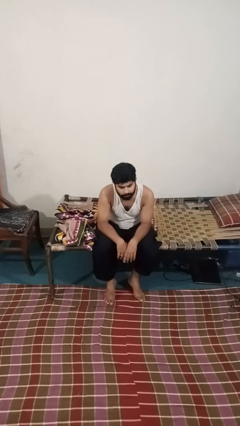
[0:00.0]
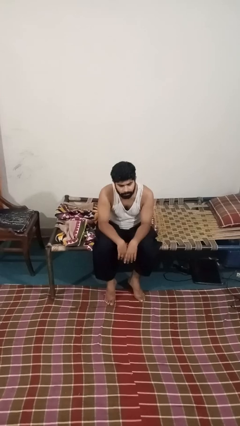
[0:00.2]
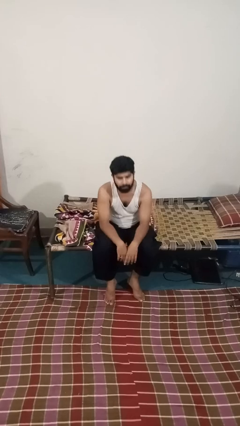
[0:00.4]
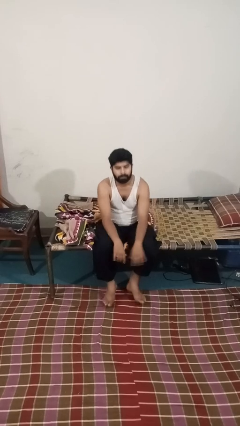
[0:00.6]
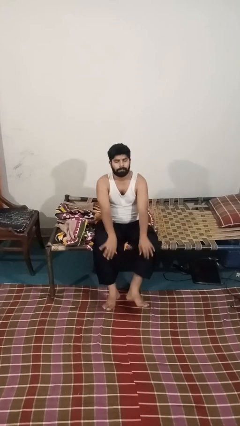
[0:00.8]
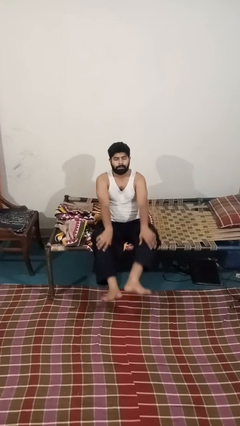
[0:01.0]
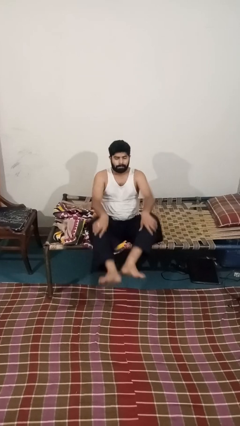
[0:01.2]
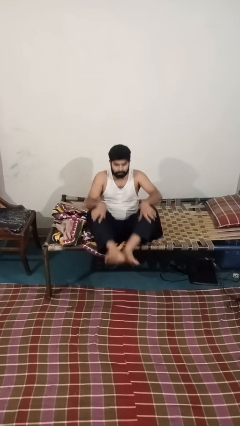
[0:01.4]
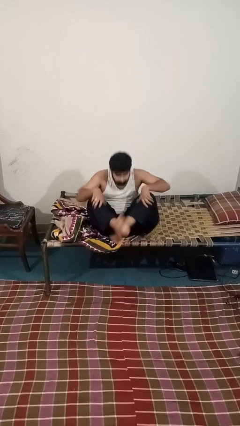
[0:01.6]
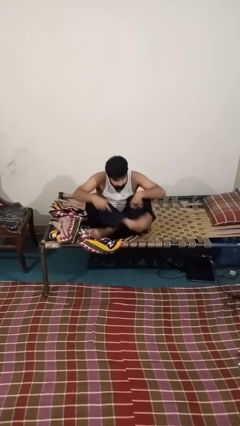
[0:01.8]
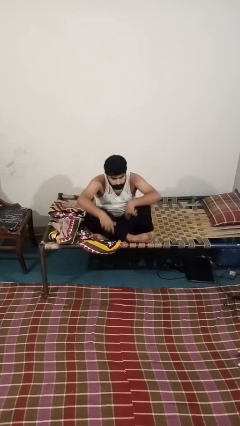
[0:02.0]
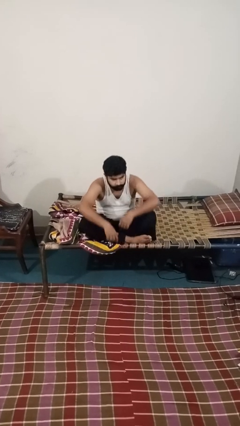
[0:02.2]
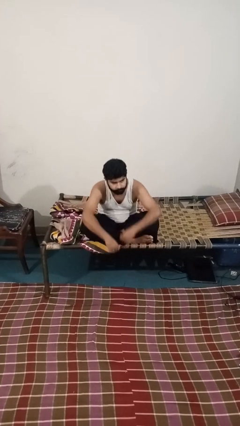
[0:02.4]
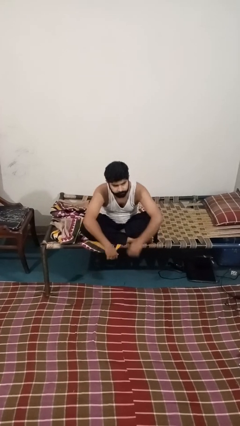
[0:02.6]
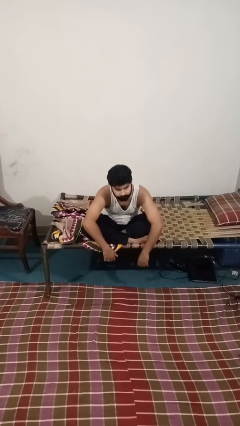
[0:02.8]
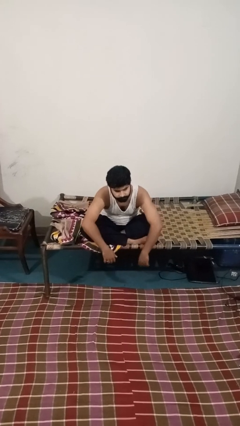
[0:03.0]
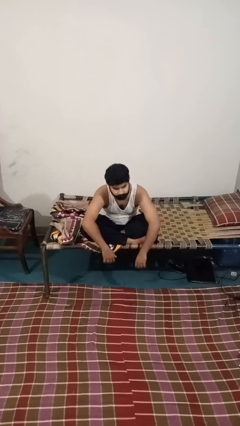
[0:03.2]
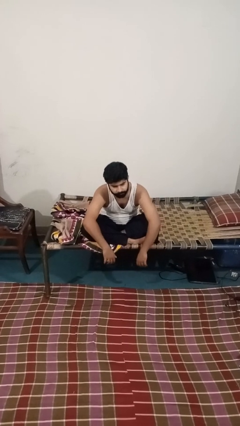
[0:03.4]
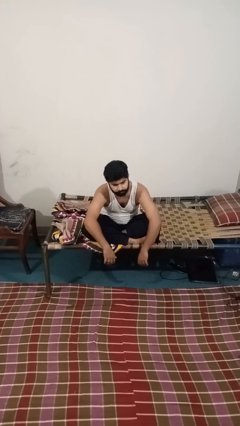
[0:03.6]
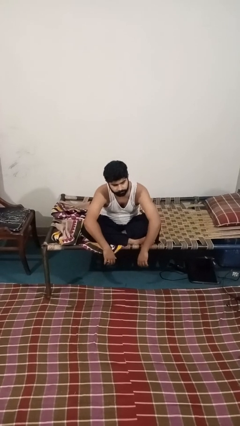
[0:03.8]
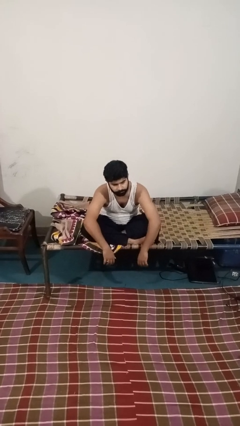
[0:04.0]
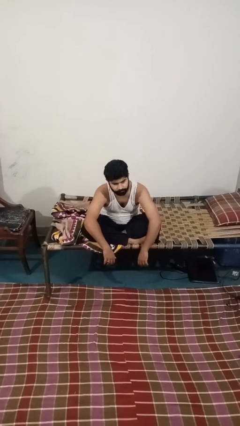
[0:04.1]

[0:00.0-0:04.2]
person crosses legs

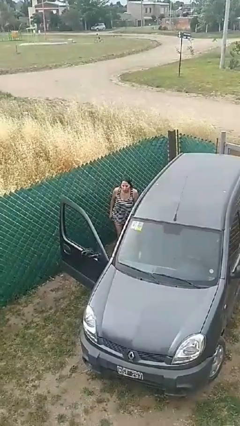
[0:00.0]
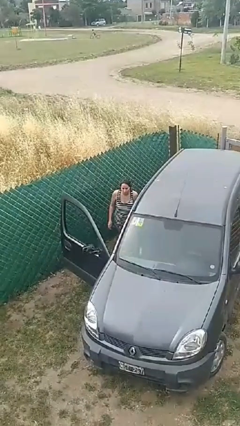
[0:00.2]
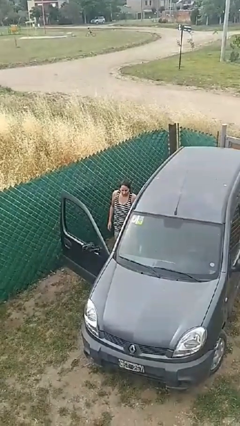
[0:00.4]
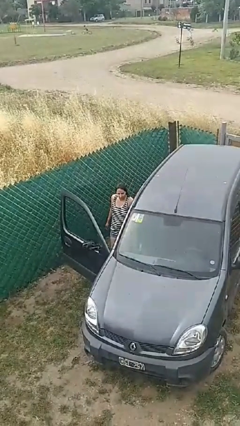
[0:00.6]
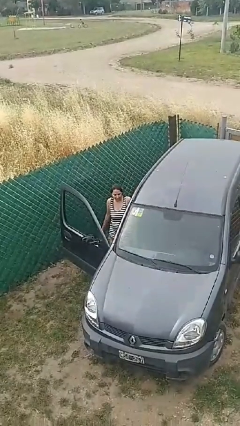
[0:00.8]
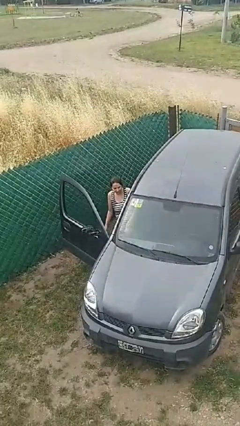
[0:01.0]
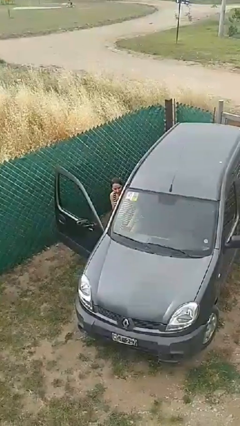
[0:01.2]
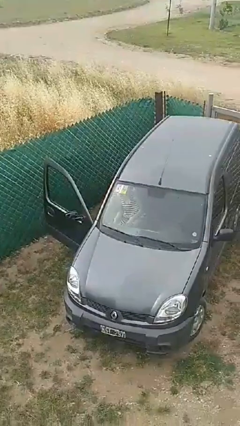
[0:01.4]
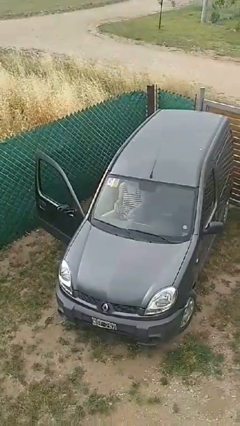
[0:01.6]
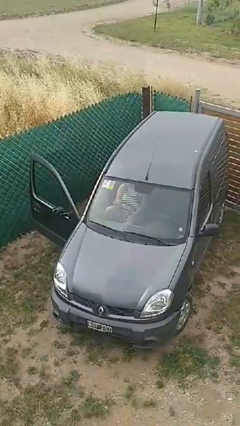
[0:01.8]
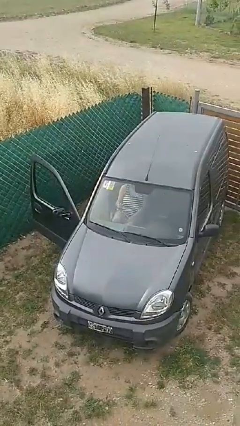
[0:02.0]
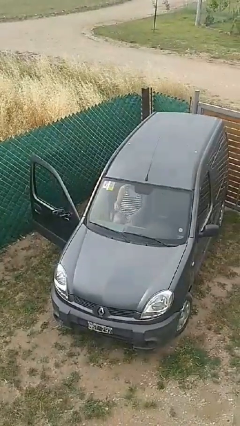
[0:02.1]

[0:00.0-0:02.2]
person enters car

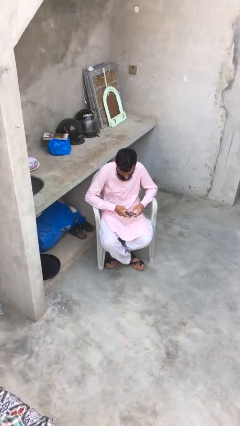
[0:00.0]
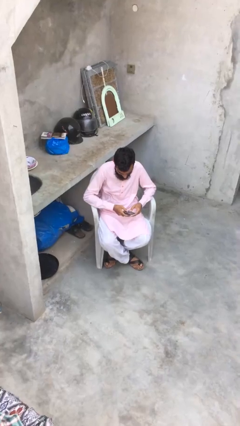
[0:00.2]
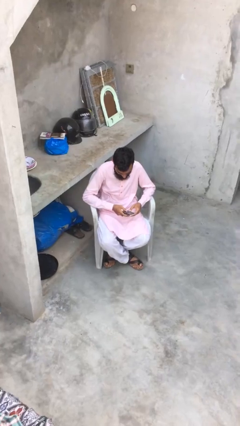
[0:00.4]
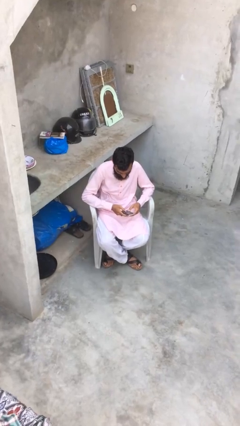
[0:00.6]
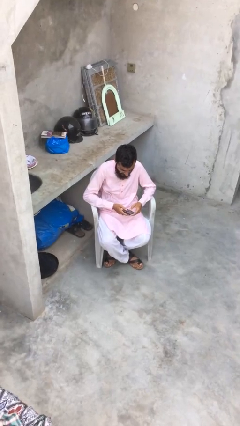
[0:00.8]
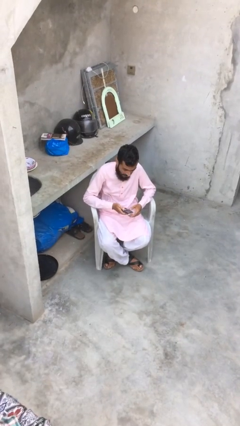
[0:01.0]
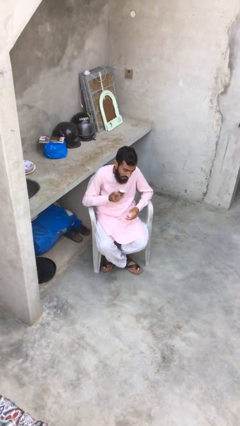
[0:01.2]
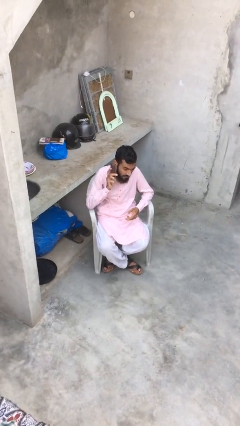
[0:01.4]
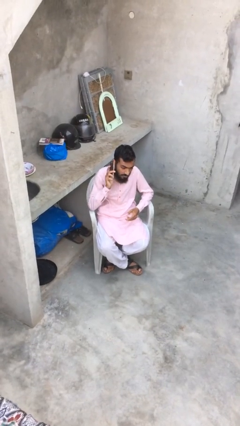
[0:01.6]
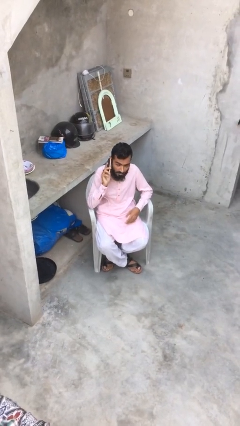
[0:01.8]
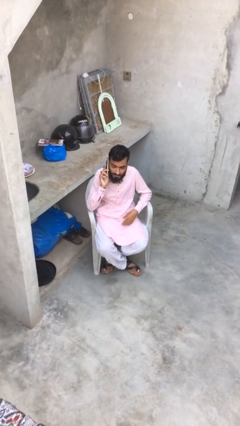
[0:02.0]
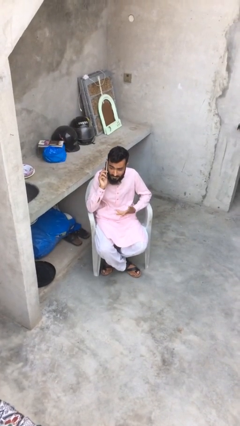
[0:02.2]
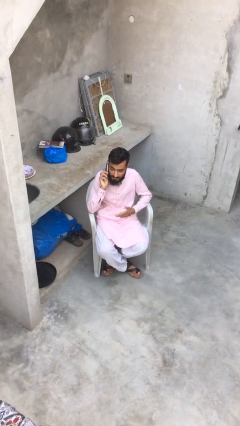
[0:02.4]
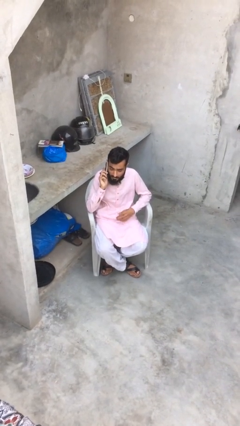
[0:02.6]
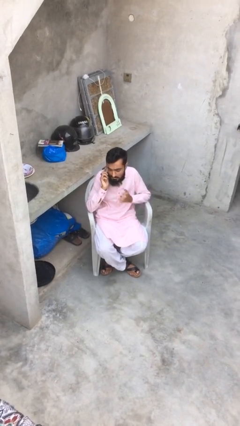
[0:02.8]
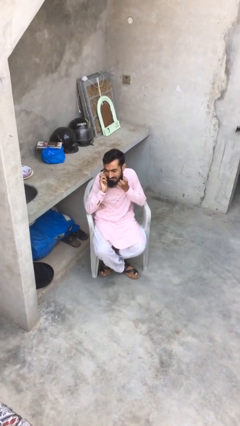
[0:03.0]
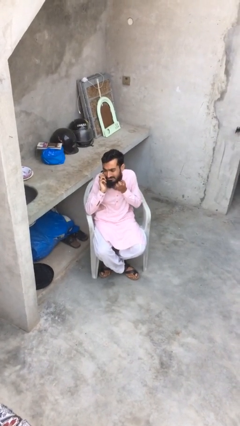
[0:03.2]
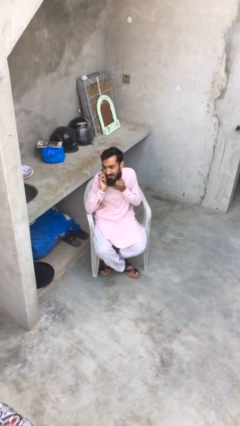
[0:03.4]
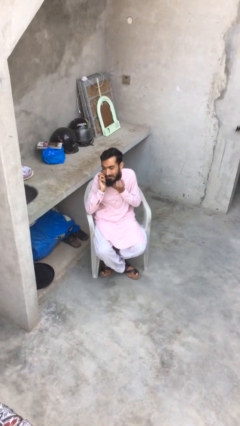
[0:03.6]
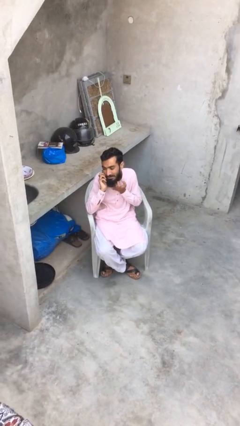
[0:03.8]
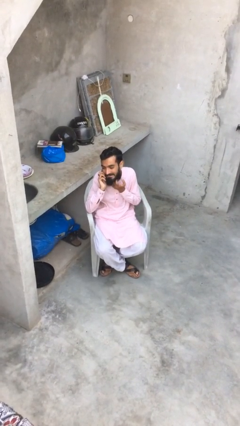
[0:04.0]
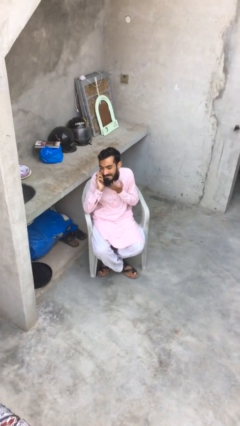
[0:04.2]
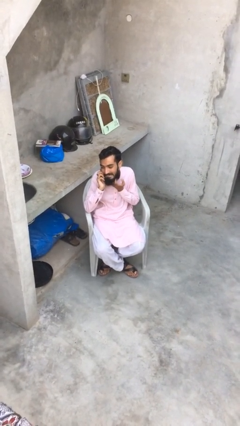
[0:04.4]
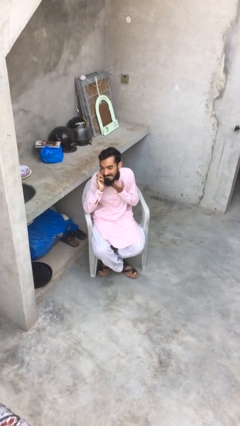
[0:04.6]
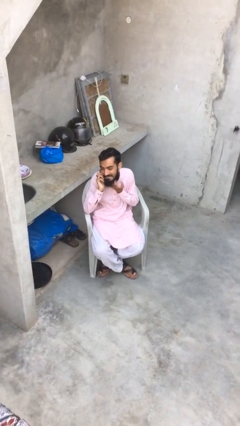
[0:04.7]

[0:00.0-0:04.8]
person talks on phone

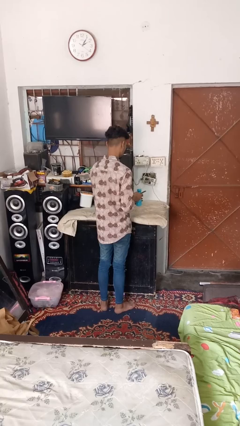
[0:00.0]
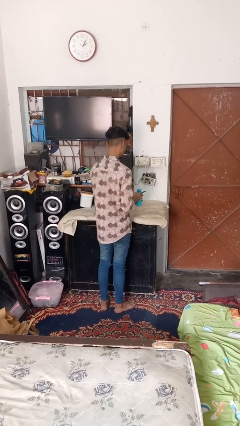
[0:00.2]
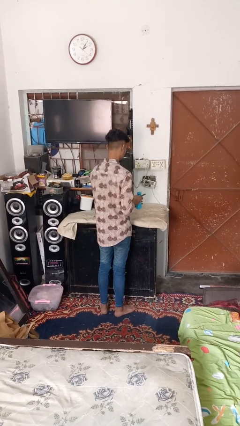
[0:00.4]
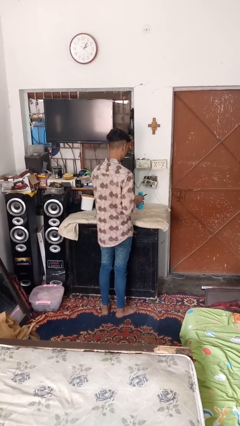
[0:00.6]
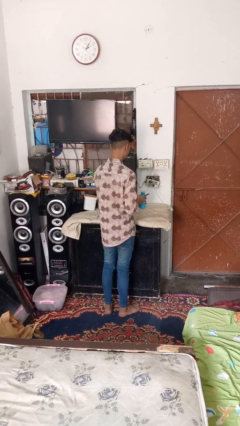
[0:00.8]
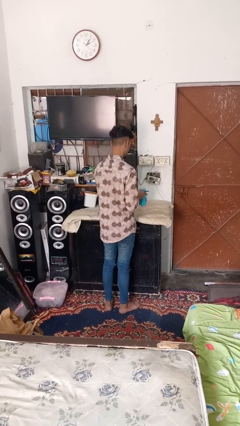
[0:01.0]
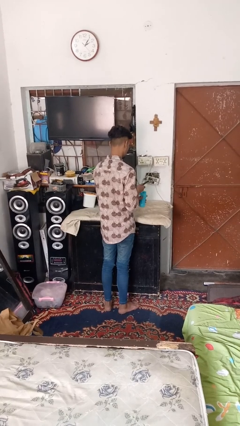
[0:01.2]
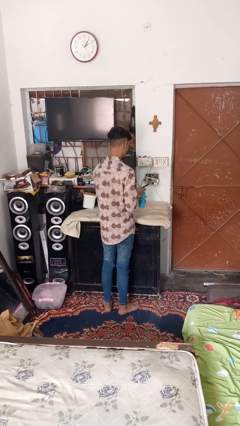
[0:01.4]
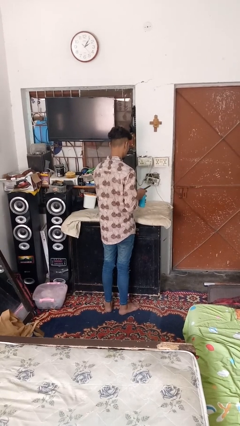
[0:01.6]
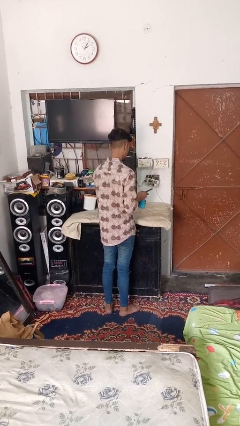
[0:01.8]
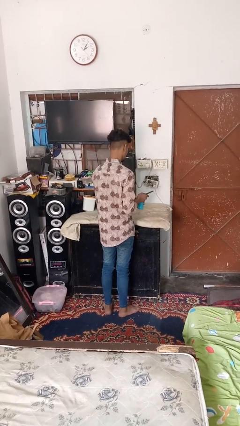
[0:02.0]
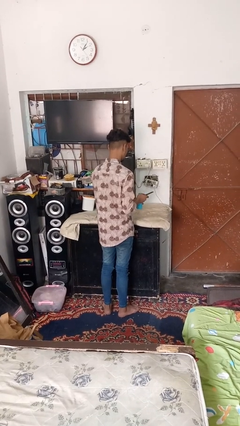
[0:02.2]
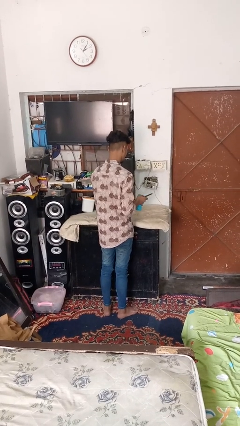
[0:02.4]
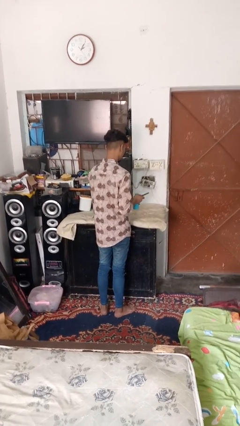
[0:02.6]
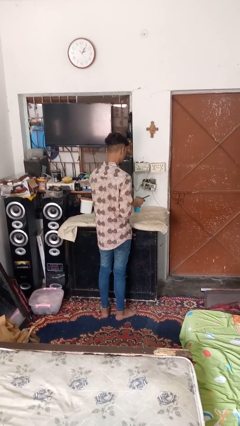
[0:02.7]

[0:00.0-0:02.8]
person opens can with can opener

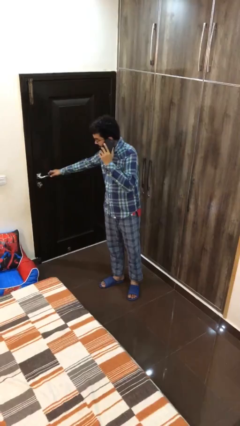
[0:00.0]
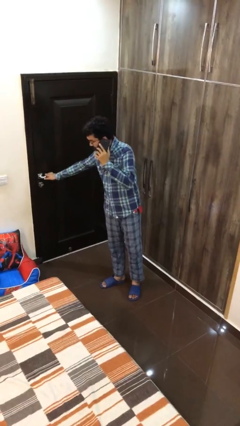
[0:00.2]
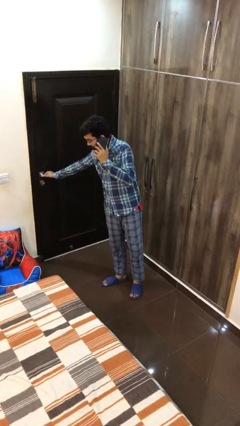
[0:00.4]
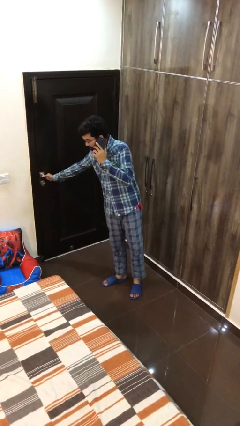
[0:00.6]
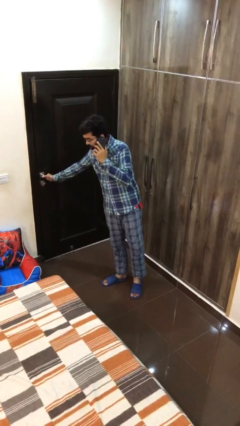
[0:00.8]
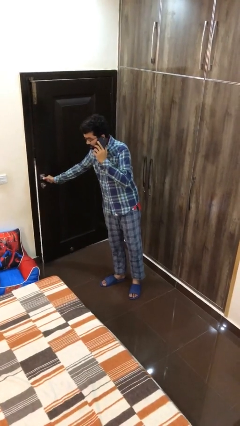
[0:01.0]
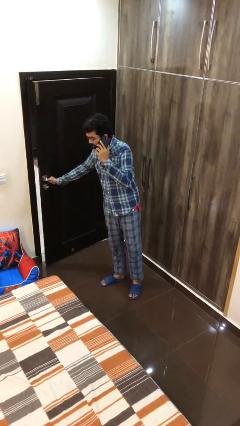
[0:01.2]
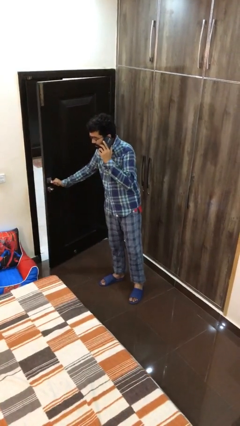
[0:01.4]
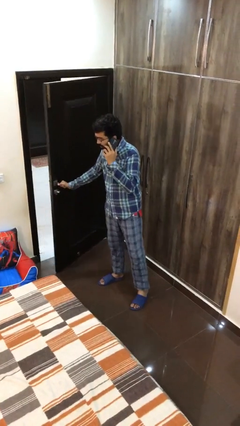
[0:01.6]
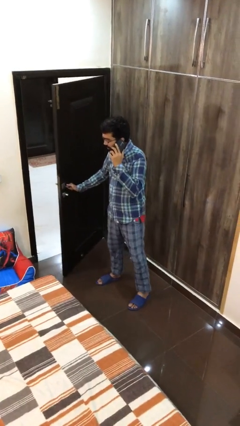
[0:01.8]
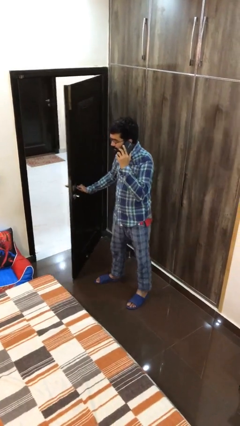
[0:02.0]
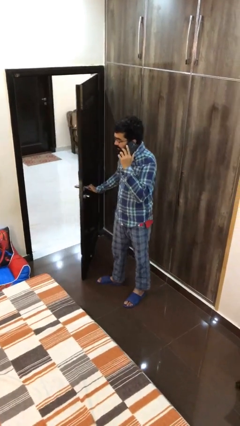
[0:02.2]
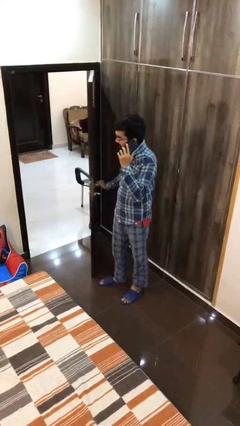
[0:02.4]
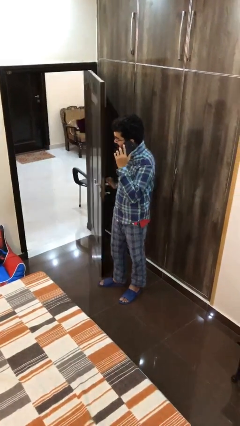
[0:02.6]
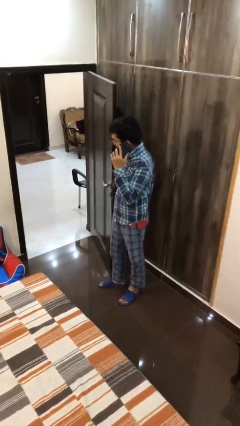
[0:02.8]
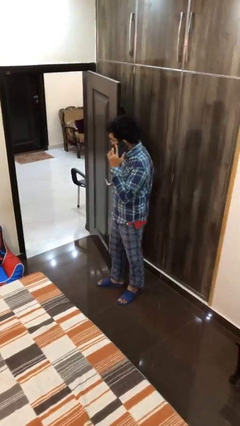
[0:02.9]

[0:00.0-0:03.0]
person opens facility door

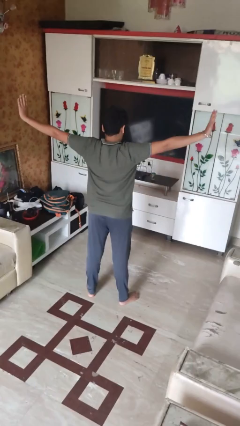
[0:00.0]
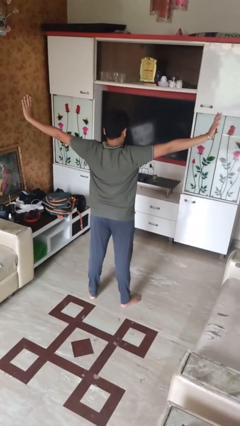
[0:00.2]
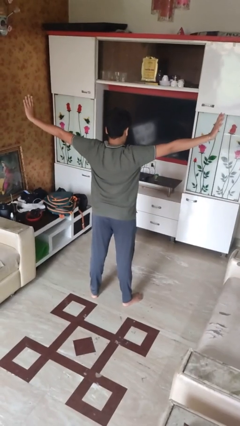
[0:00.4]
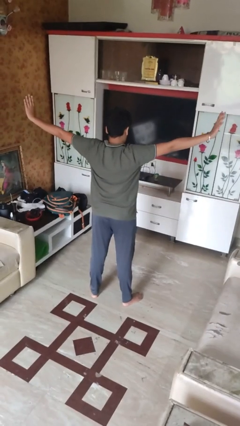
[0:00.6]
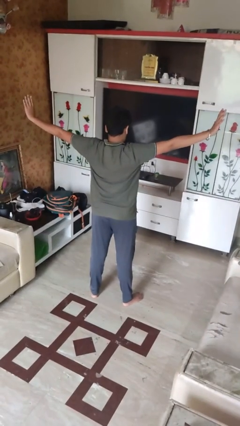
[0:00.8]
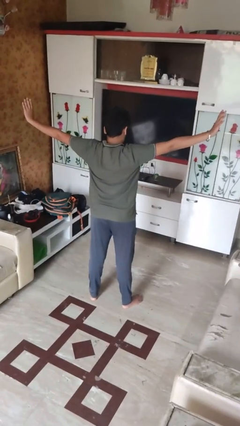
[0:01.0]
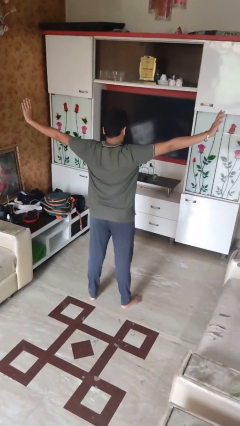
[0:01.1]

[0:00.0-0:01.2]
person stretches arms to side
